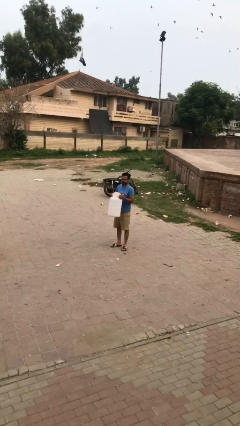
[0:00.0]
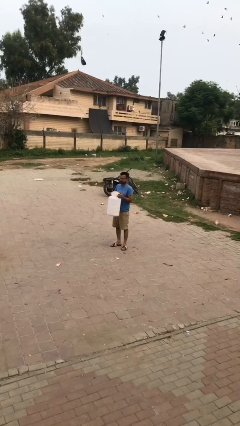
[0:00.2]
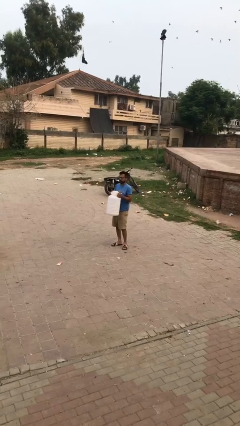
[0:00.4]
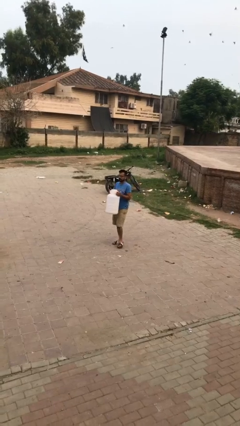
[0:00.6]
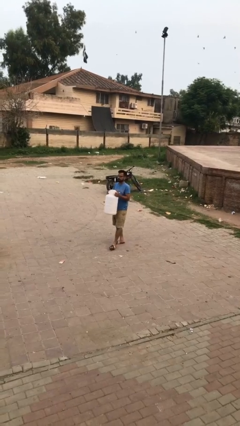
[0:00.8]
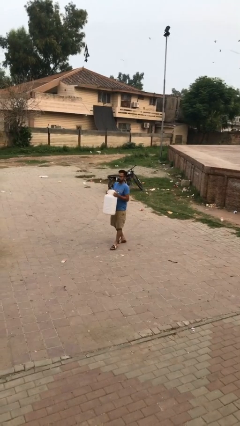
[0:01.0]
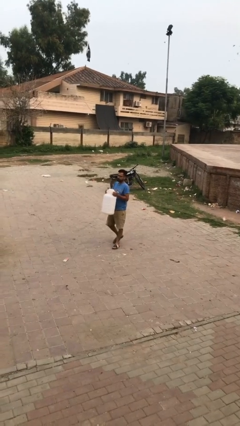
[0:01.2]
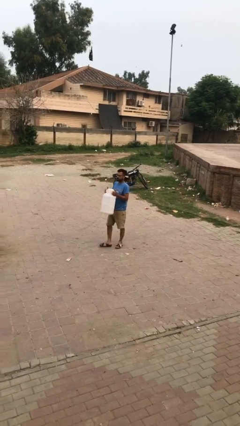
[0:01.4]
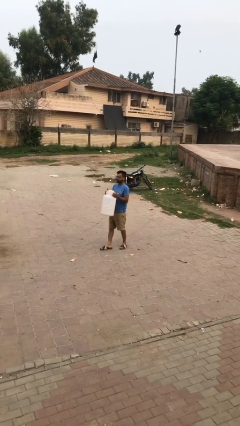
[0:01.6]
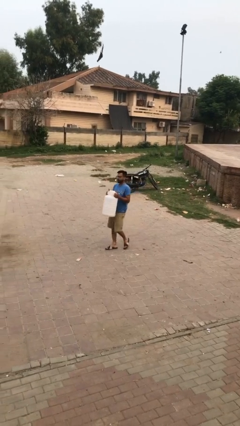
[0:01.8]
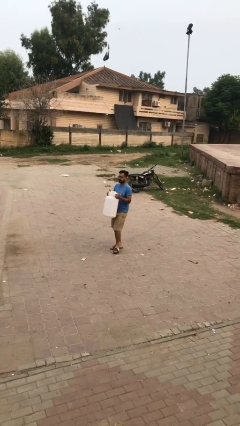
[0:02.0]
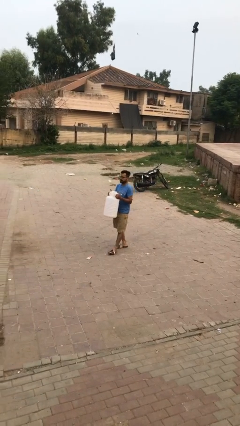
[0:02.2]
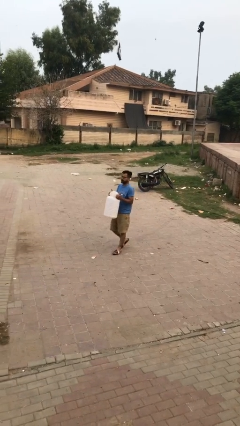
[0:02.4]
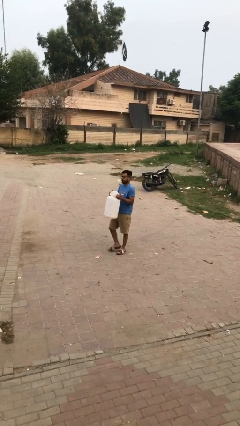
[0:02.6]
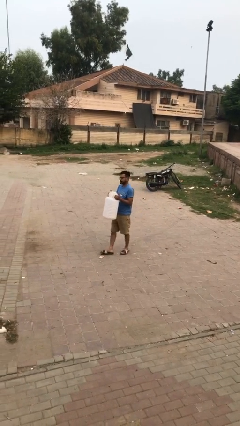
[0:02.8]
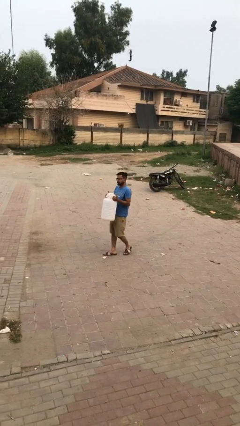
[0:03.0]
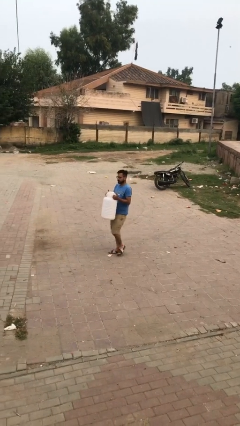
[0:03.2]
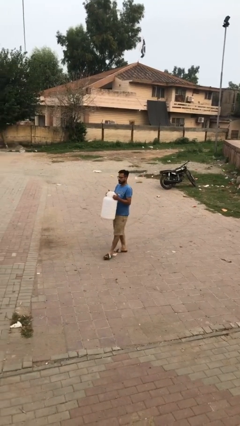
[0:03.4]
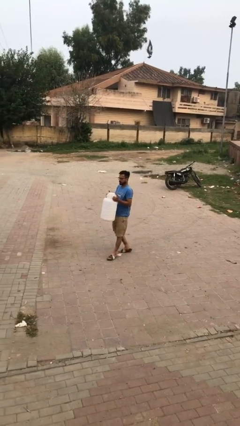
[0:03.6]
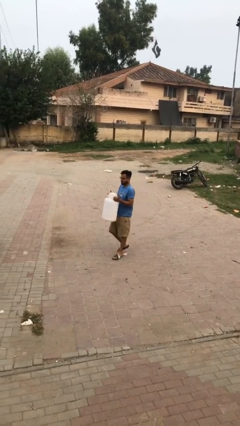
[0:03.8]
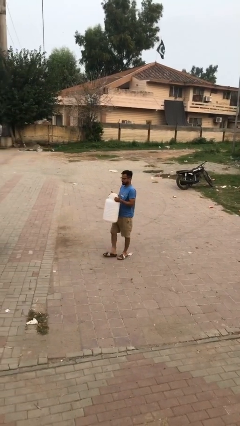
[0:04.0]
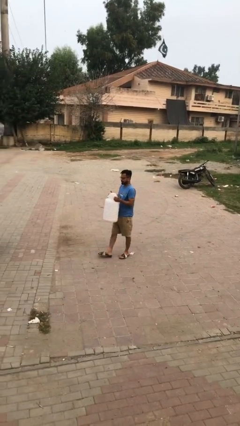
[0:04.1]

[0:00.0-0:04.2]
person carries heavy object

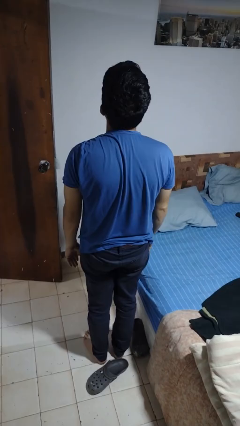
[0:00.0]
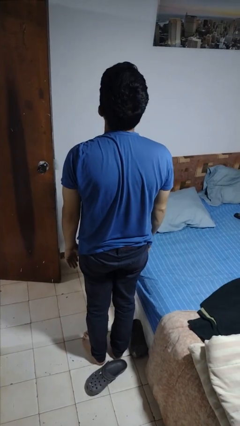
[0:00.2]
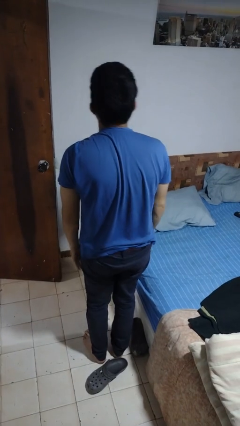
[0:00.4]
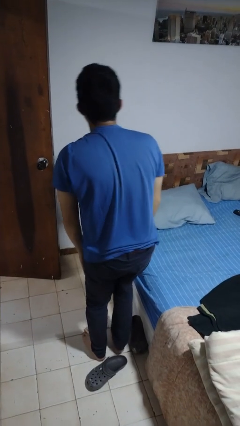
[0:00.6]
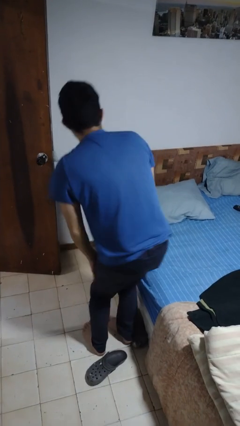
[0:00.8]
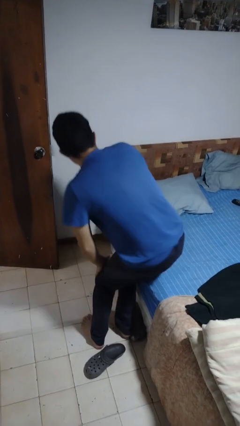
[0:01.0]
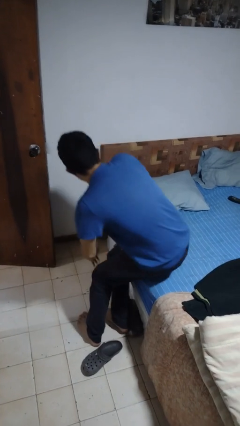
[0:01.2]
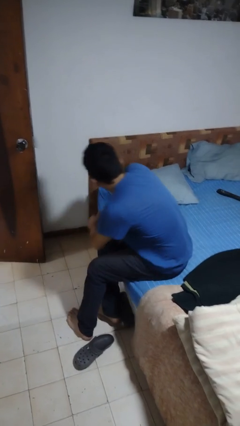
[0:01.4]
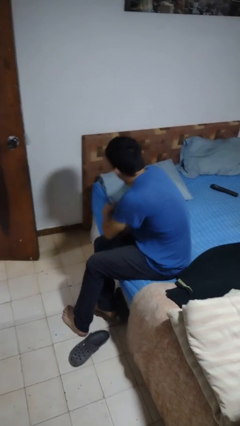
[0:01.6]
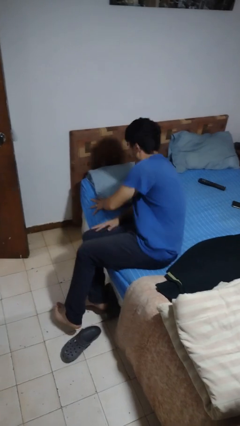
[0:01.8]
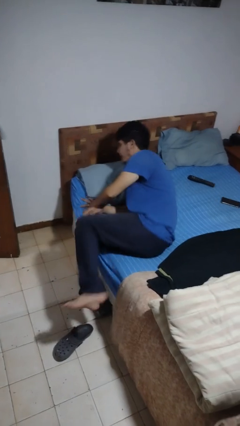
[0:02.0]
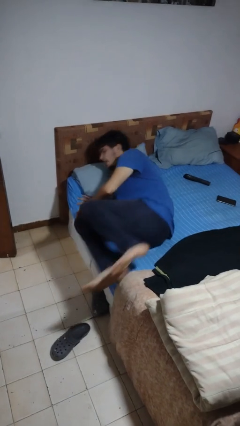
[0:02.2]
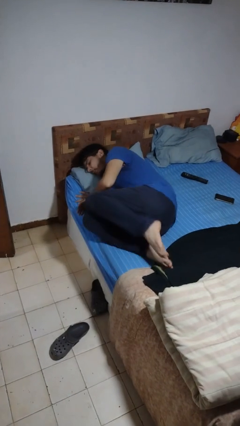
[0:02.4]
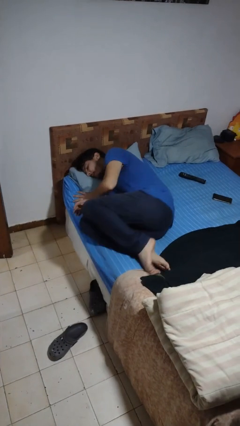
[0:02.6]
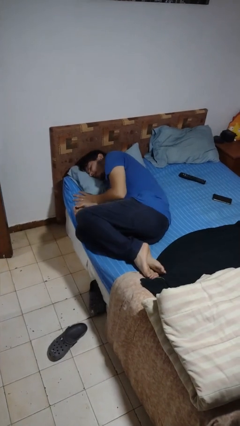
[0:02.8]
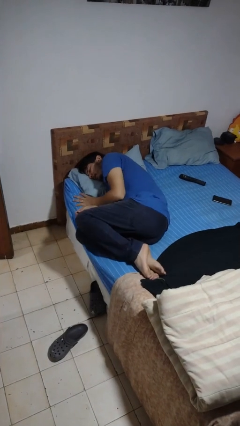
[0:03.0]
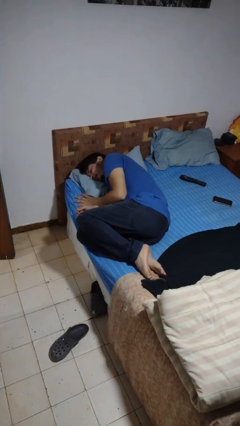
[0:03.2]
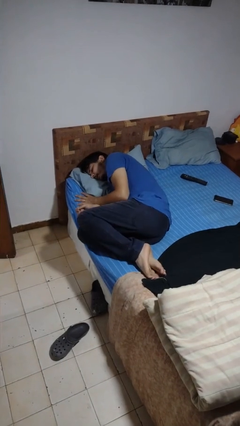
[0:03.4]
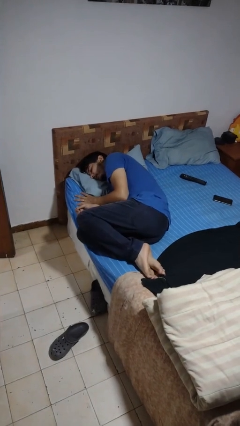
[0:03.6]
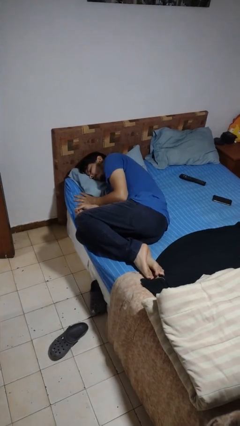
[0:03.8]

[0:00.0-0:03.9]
person lies down on bed

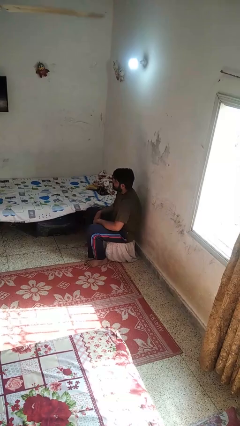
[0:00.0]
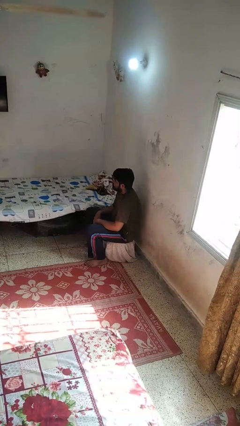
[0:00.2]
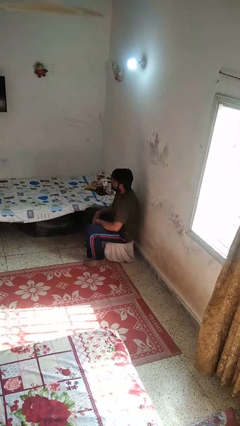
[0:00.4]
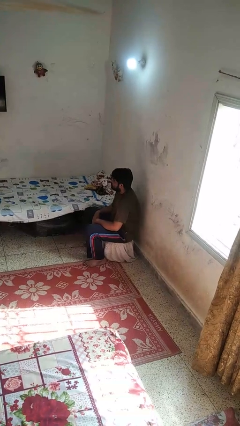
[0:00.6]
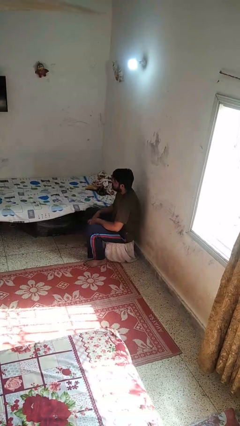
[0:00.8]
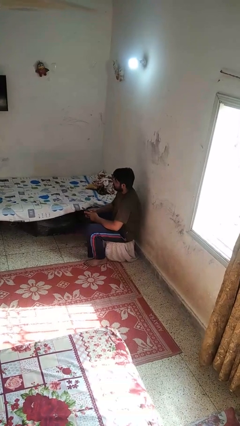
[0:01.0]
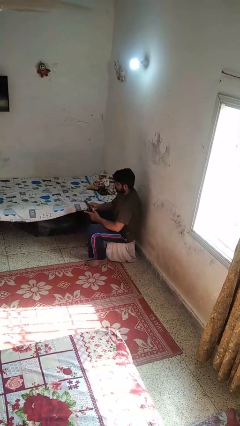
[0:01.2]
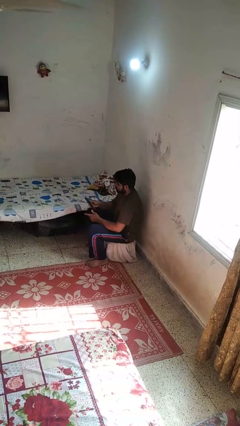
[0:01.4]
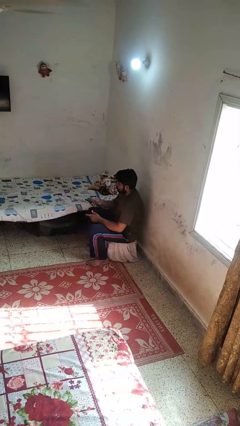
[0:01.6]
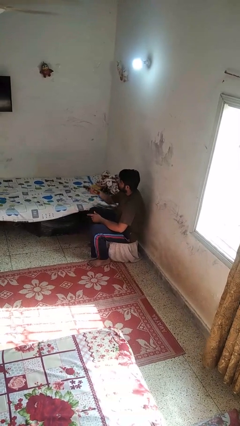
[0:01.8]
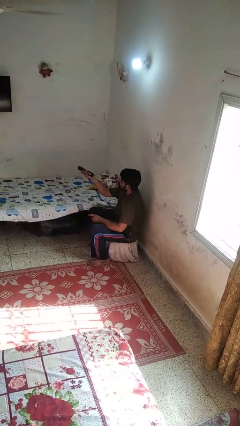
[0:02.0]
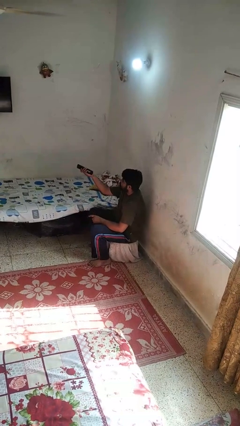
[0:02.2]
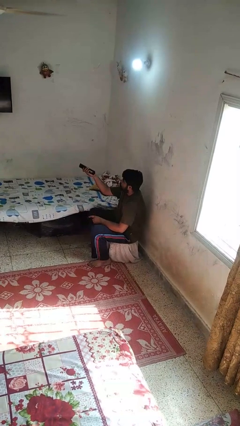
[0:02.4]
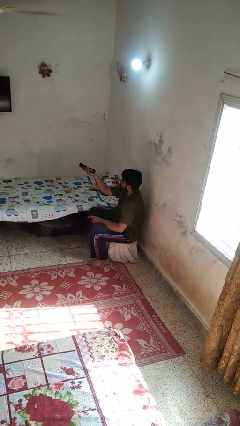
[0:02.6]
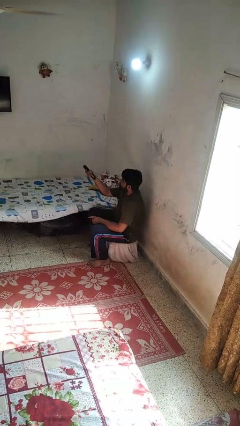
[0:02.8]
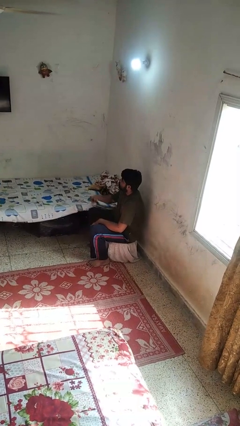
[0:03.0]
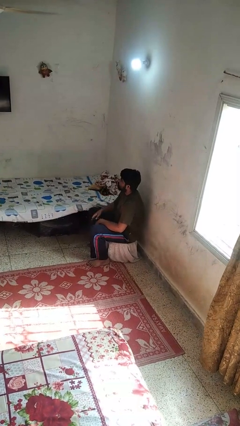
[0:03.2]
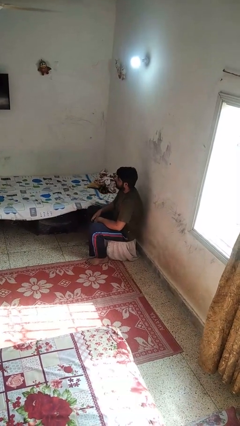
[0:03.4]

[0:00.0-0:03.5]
person uses television remote

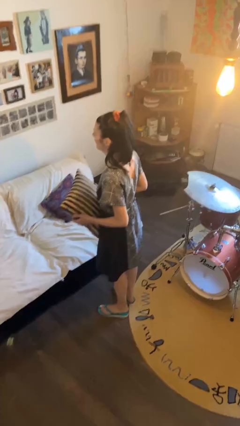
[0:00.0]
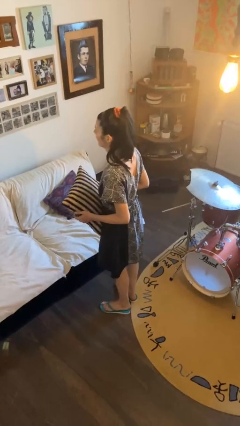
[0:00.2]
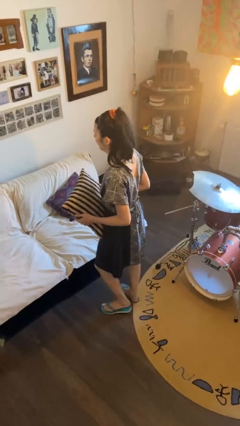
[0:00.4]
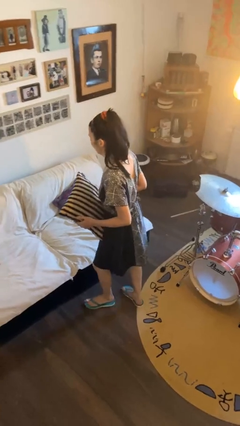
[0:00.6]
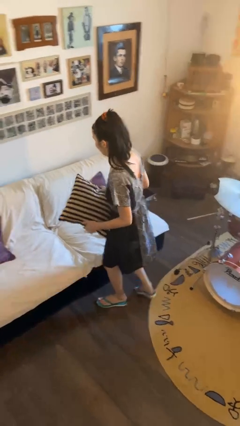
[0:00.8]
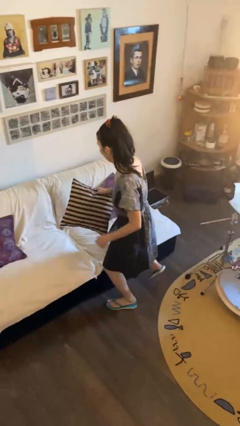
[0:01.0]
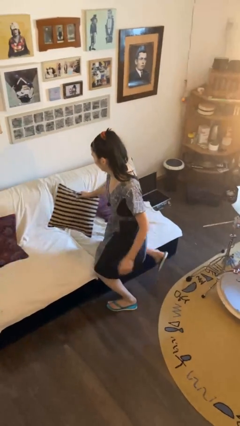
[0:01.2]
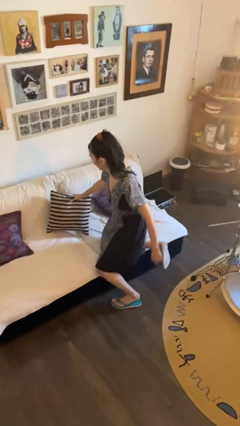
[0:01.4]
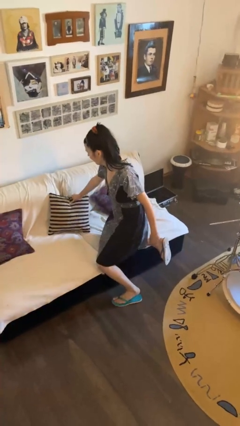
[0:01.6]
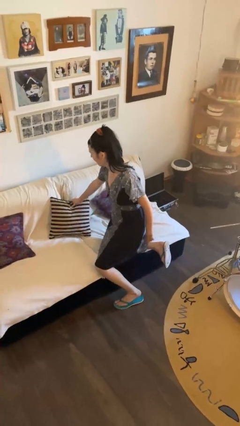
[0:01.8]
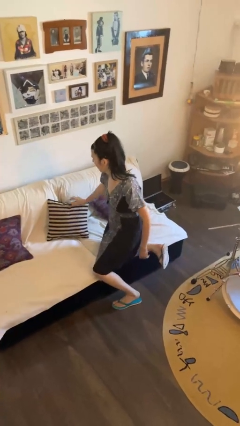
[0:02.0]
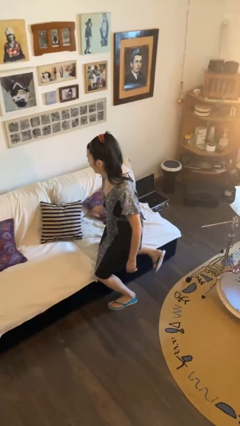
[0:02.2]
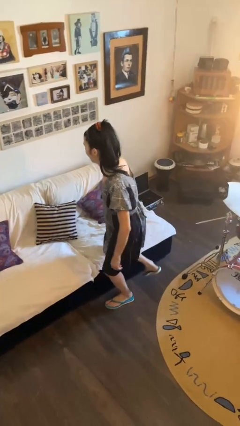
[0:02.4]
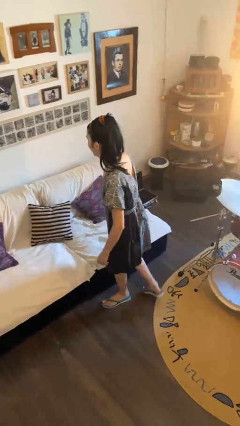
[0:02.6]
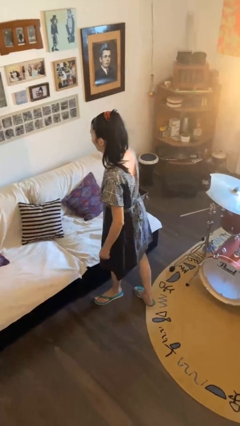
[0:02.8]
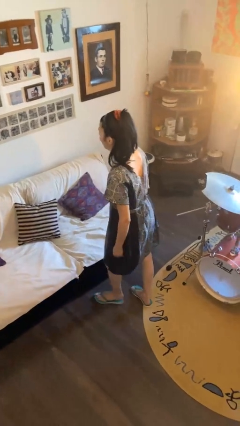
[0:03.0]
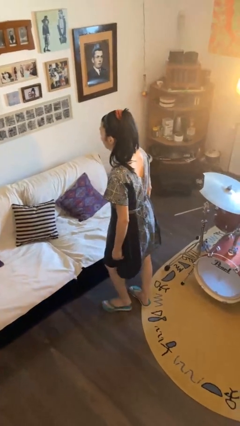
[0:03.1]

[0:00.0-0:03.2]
person puts down object on couch

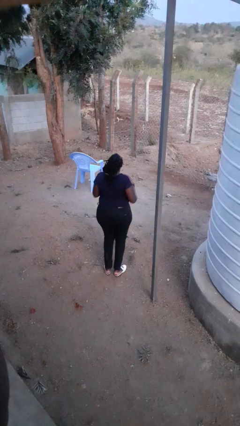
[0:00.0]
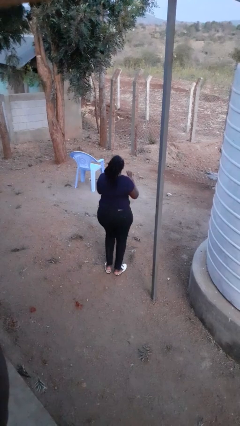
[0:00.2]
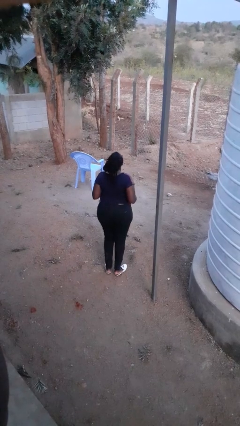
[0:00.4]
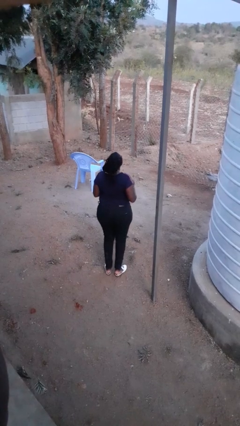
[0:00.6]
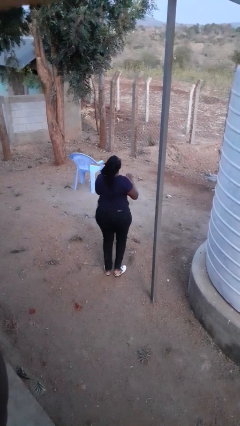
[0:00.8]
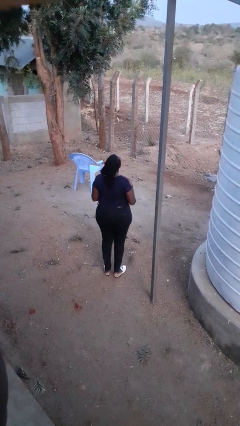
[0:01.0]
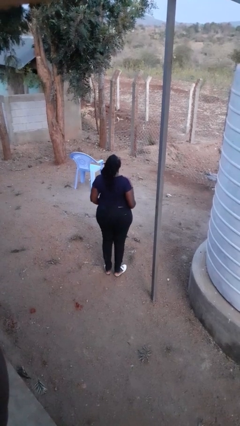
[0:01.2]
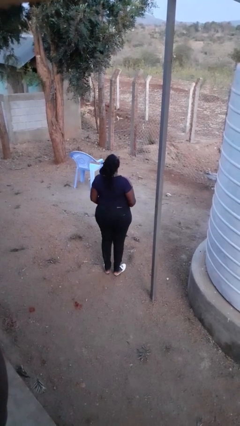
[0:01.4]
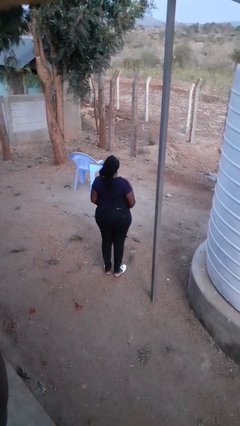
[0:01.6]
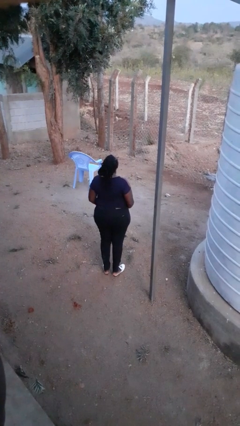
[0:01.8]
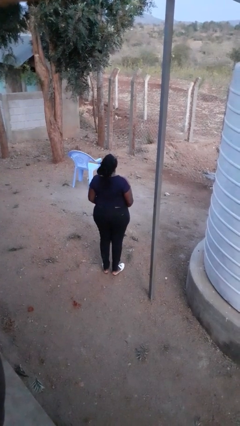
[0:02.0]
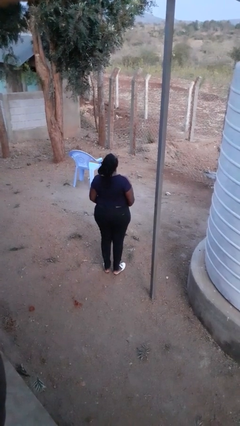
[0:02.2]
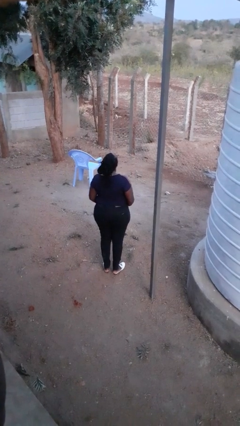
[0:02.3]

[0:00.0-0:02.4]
person dances in place

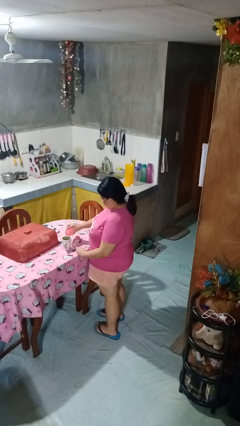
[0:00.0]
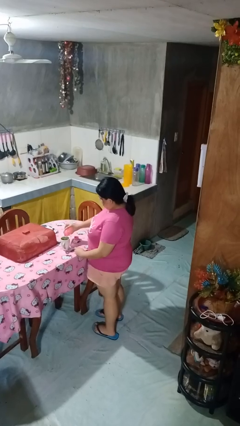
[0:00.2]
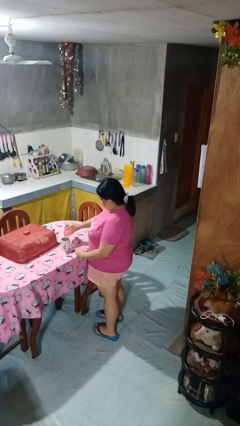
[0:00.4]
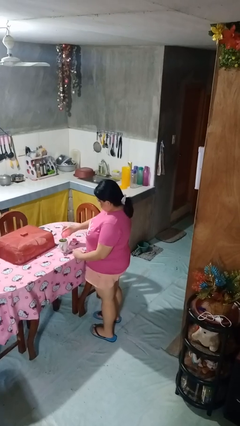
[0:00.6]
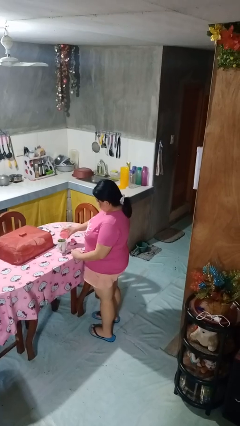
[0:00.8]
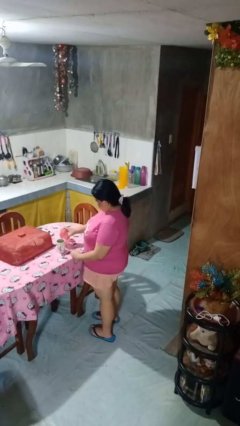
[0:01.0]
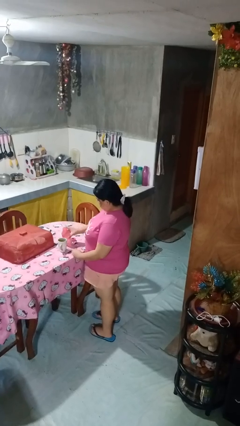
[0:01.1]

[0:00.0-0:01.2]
person pours liquid into cup
